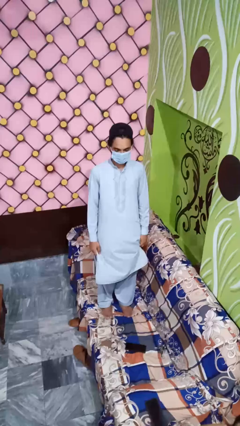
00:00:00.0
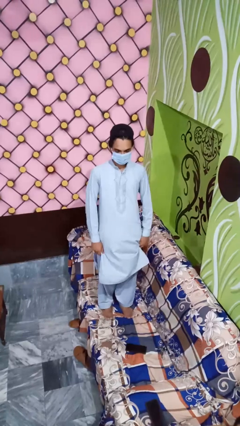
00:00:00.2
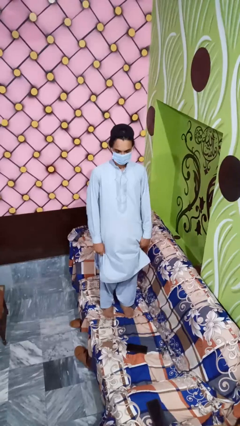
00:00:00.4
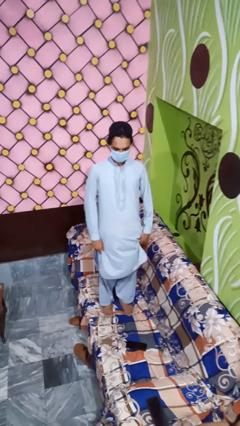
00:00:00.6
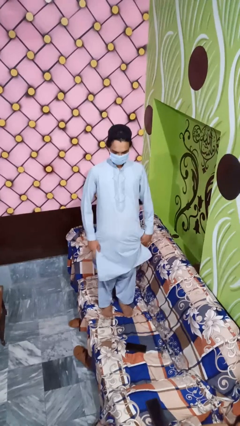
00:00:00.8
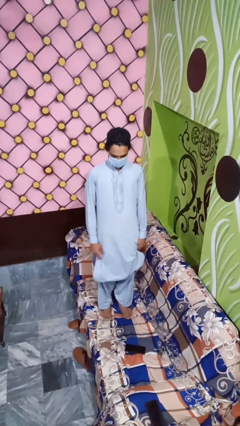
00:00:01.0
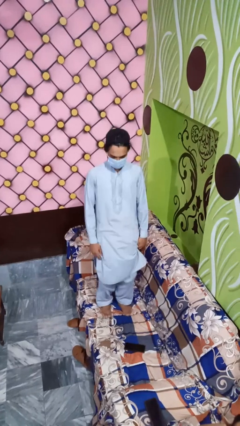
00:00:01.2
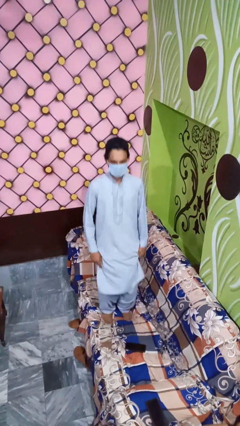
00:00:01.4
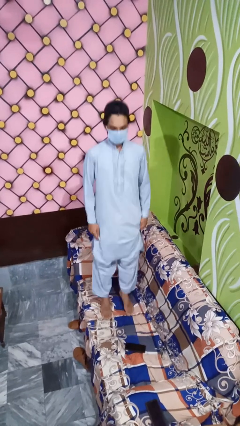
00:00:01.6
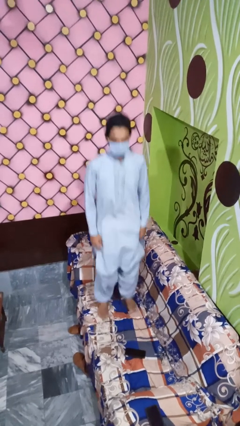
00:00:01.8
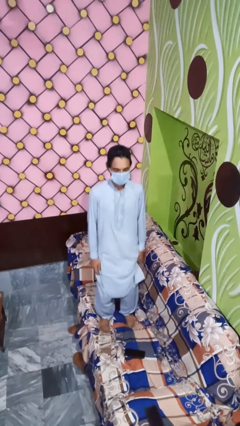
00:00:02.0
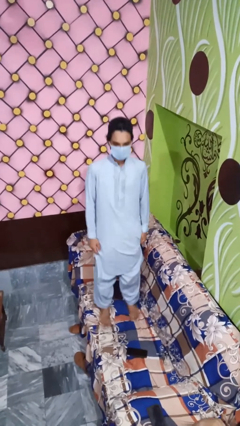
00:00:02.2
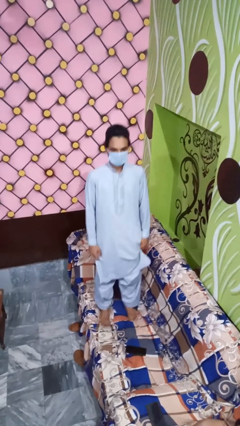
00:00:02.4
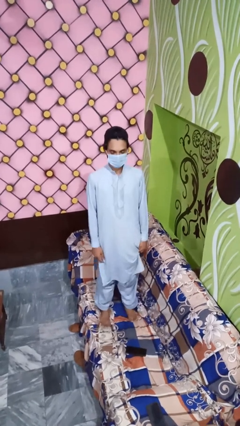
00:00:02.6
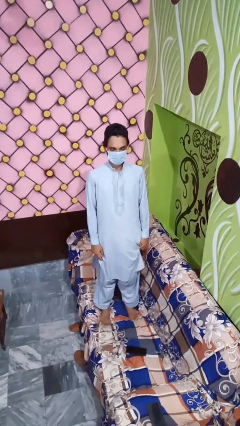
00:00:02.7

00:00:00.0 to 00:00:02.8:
person jumps on couch

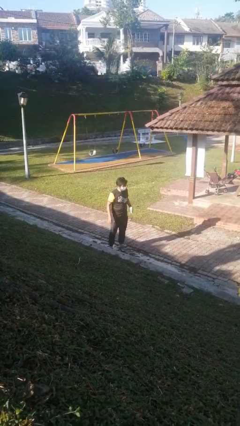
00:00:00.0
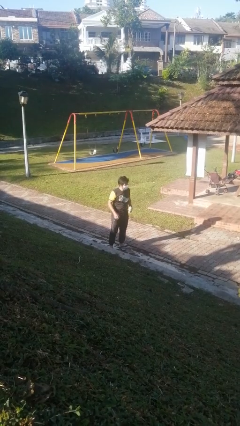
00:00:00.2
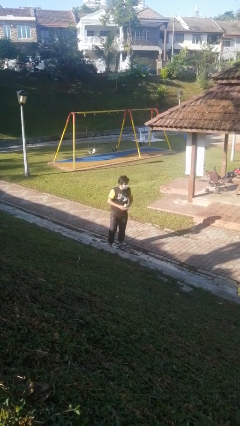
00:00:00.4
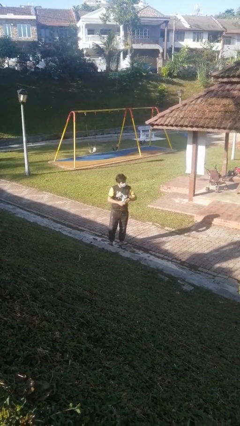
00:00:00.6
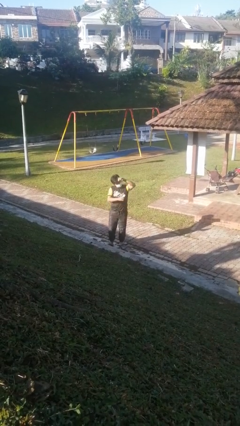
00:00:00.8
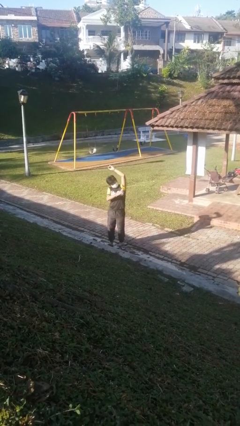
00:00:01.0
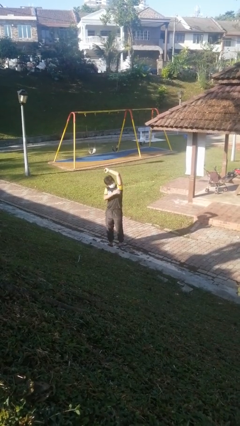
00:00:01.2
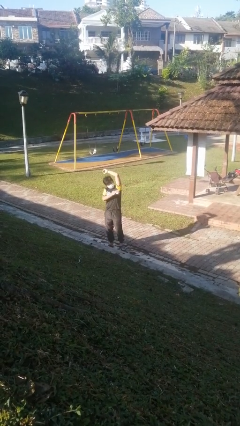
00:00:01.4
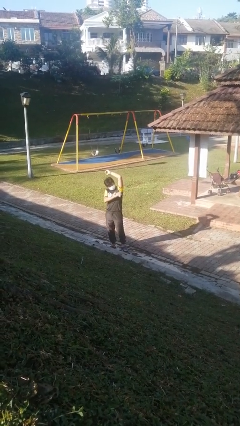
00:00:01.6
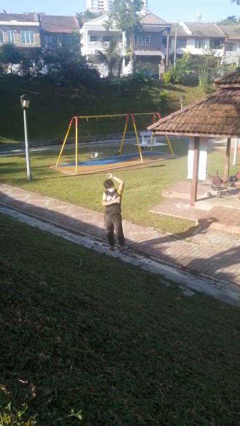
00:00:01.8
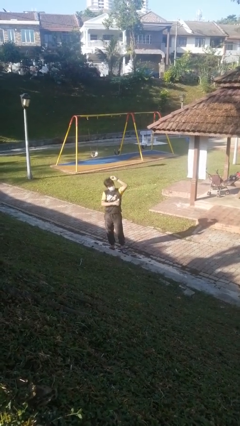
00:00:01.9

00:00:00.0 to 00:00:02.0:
person applies deodorant

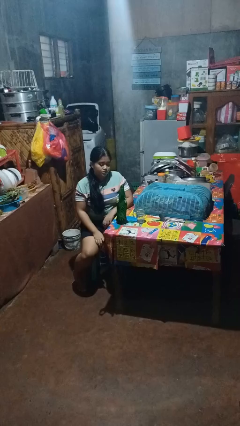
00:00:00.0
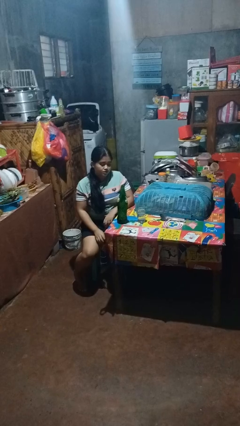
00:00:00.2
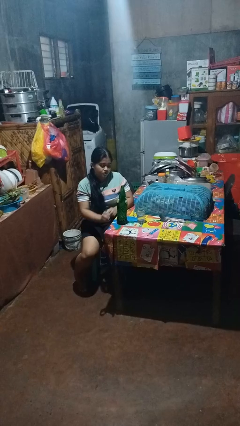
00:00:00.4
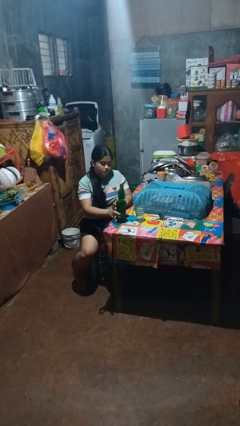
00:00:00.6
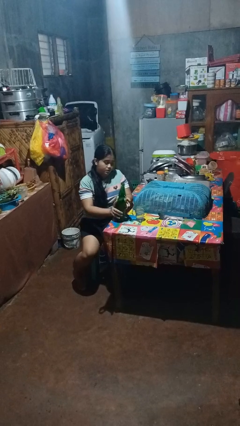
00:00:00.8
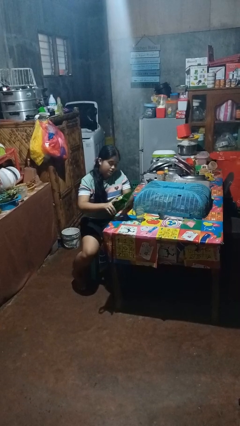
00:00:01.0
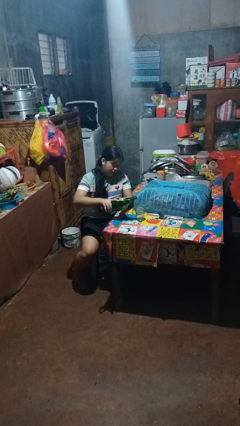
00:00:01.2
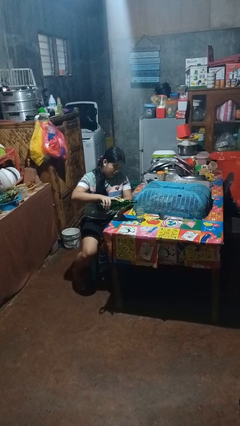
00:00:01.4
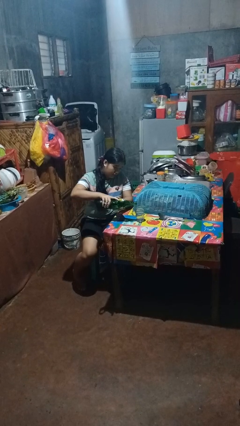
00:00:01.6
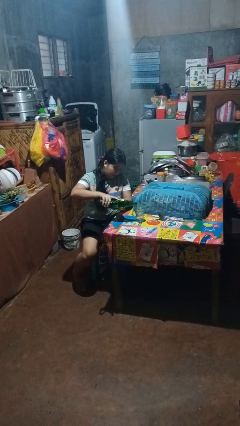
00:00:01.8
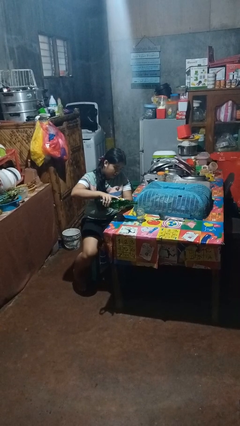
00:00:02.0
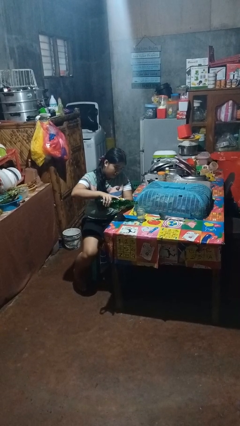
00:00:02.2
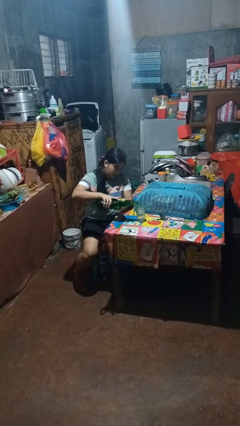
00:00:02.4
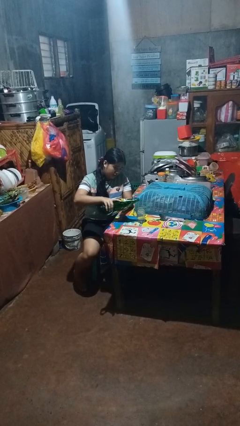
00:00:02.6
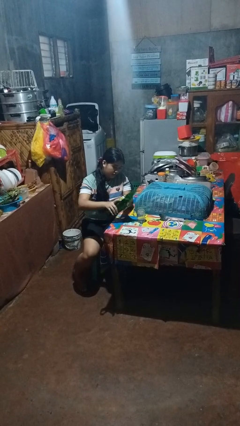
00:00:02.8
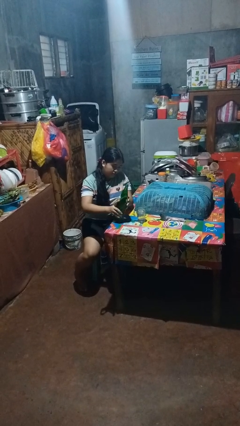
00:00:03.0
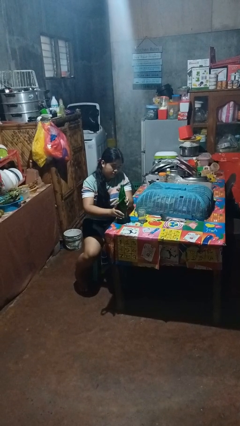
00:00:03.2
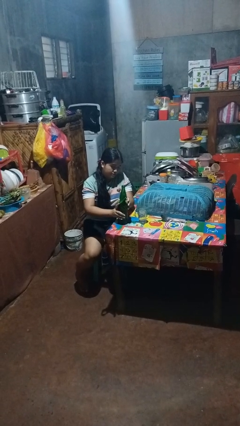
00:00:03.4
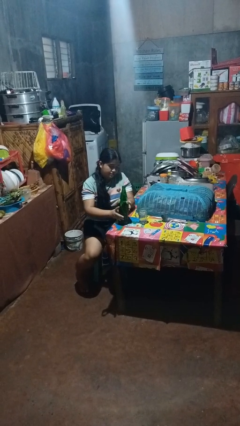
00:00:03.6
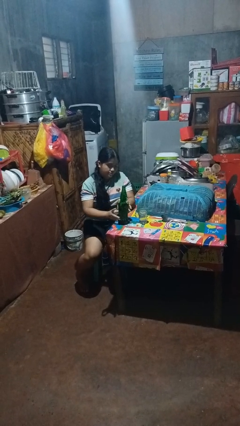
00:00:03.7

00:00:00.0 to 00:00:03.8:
person pours liquid into cup

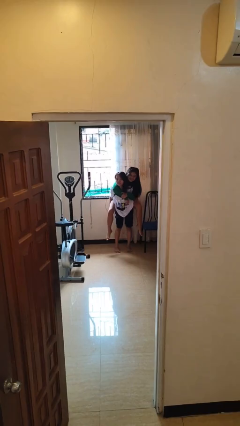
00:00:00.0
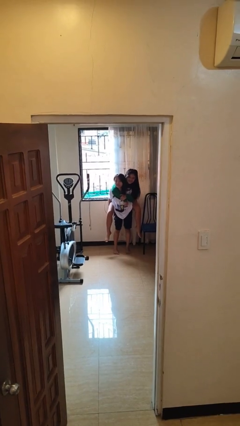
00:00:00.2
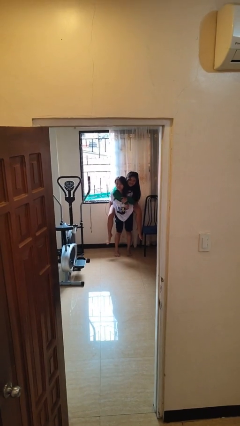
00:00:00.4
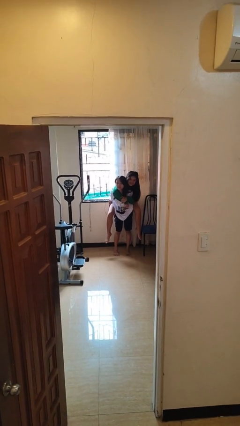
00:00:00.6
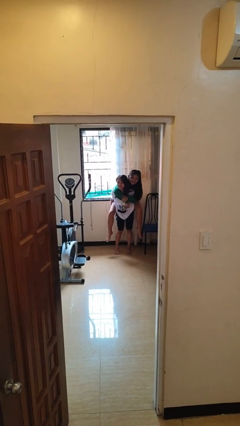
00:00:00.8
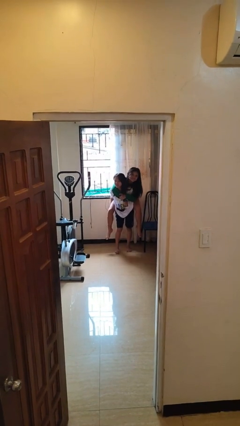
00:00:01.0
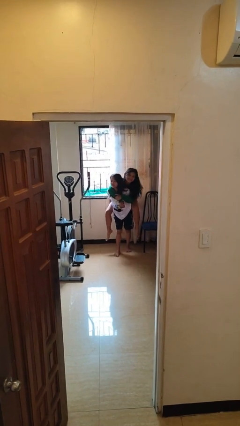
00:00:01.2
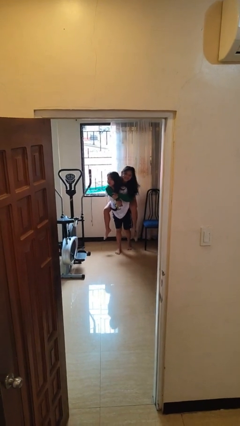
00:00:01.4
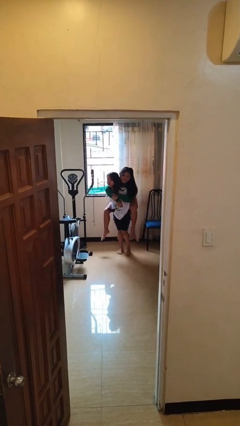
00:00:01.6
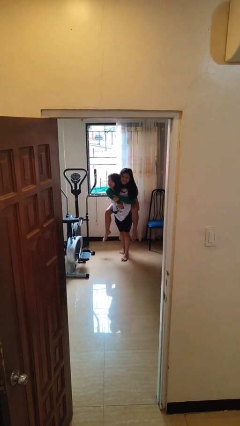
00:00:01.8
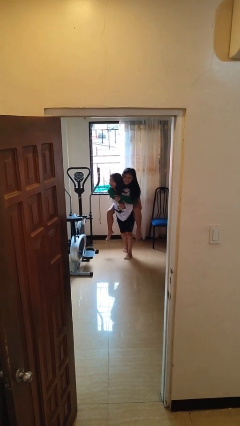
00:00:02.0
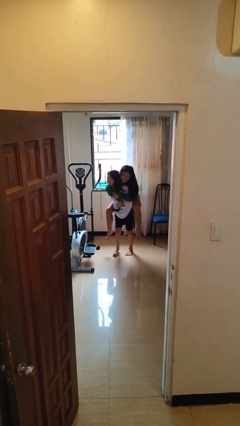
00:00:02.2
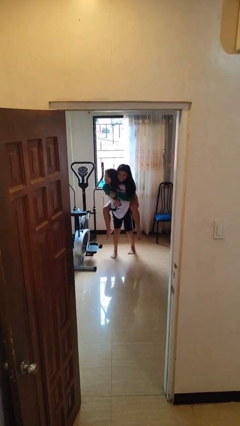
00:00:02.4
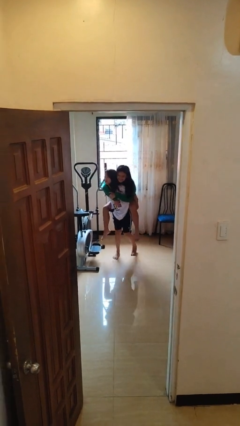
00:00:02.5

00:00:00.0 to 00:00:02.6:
person carries person on back

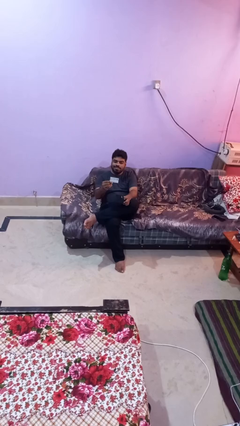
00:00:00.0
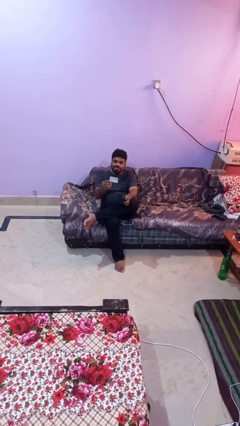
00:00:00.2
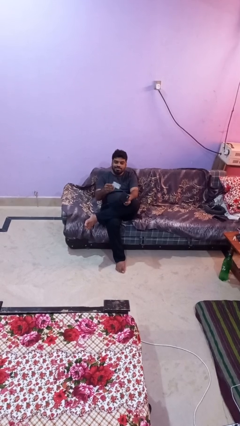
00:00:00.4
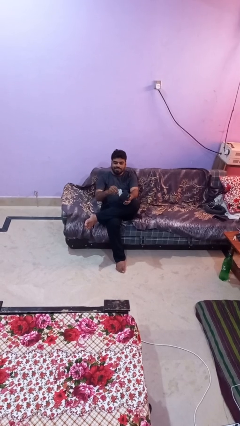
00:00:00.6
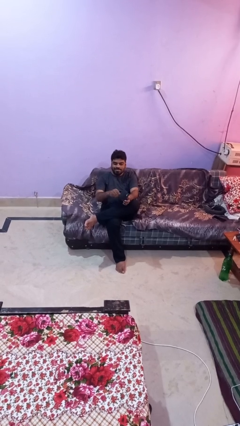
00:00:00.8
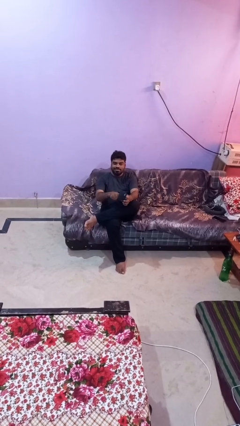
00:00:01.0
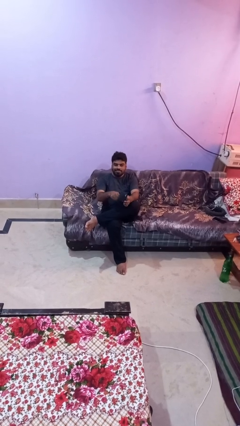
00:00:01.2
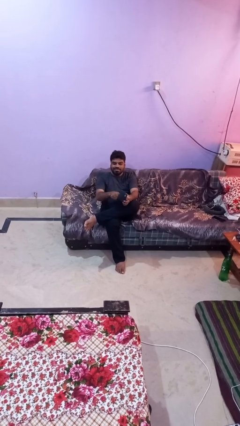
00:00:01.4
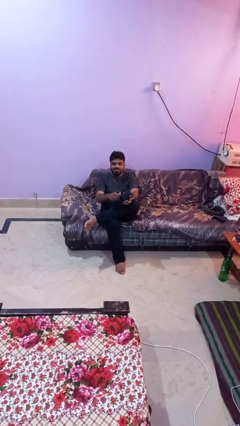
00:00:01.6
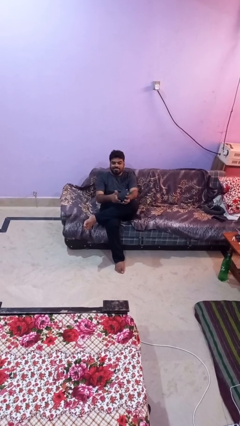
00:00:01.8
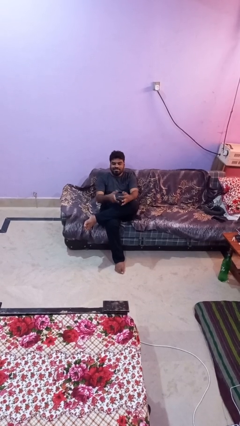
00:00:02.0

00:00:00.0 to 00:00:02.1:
person puts object into purse

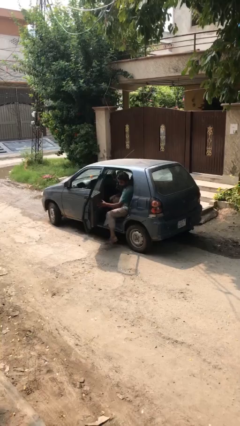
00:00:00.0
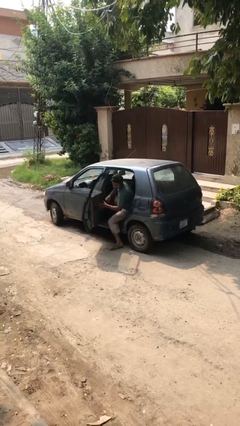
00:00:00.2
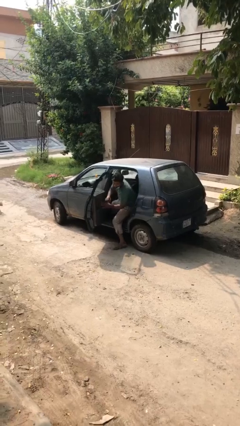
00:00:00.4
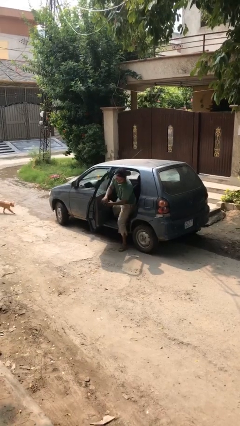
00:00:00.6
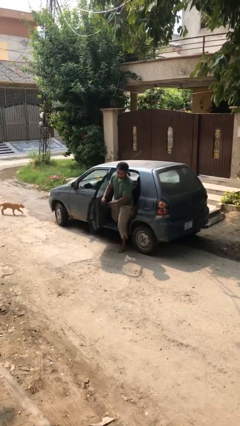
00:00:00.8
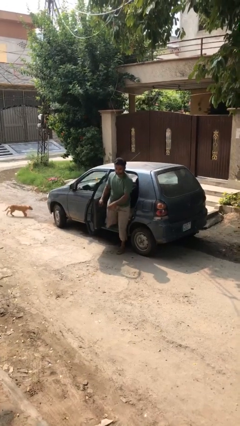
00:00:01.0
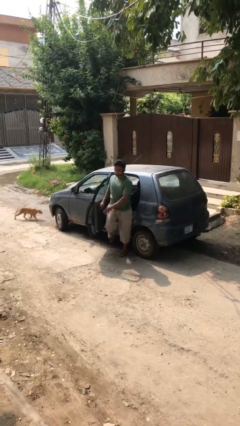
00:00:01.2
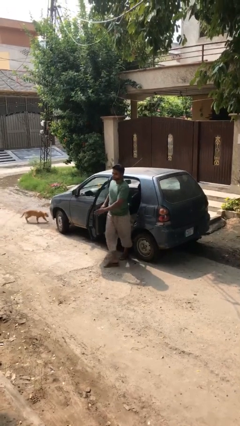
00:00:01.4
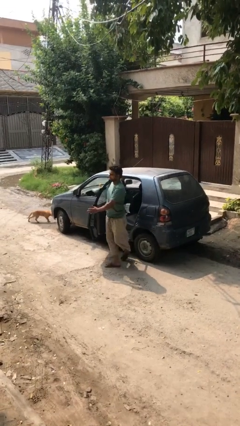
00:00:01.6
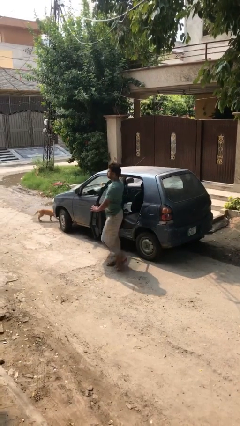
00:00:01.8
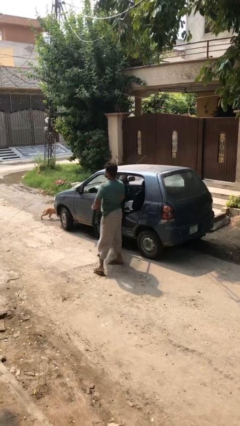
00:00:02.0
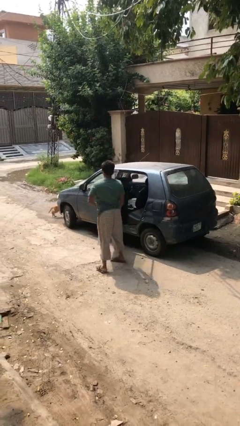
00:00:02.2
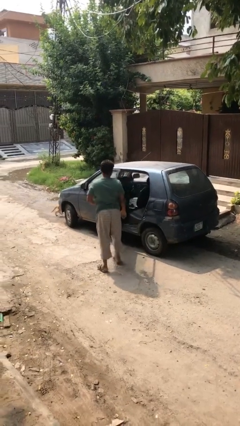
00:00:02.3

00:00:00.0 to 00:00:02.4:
person exits car

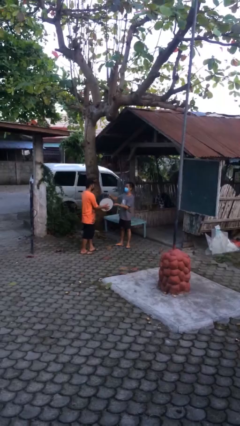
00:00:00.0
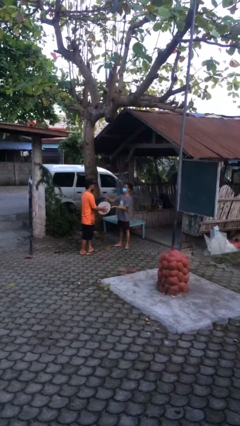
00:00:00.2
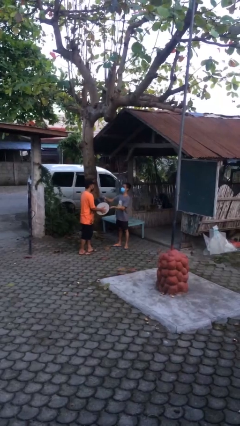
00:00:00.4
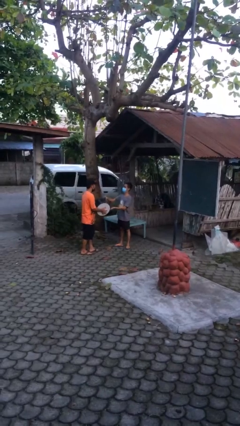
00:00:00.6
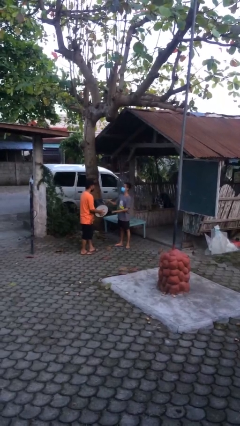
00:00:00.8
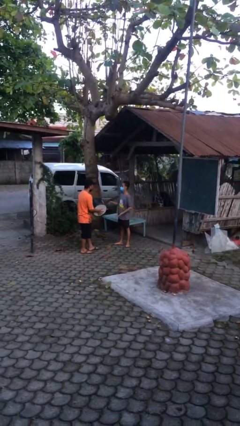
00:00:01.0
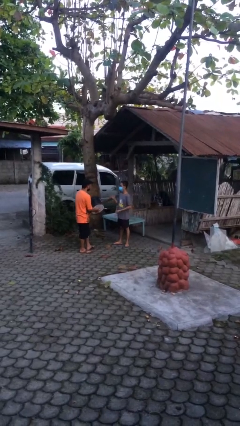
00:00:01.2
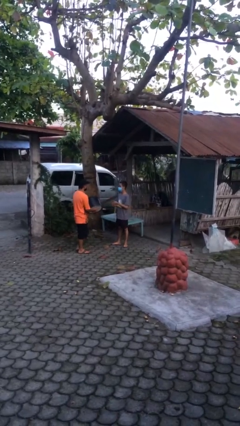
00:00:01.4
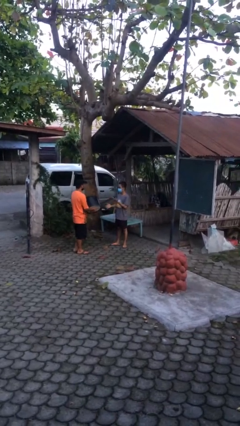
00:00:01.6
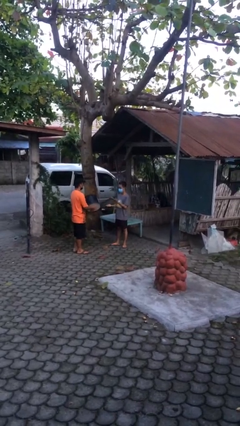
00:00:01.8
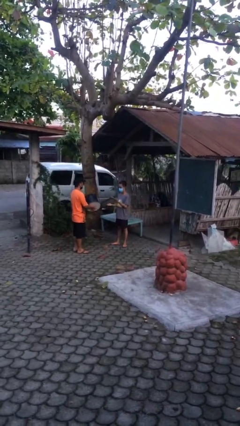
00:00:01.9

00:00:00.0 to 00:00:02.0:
person transfers object to person
